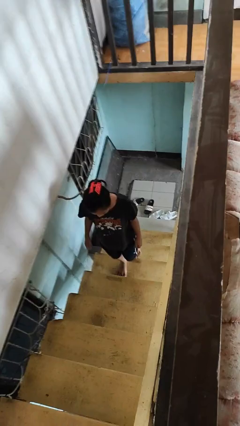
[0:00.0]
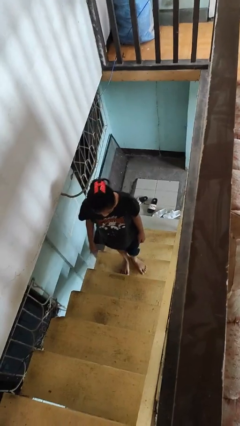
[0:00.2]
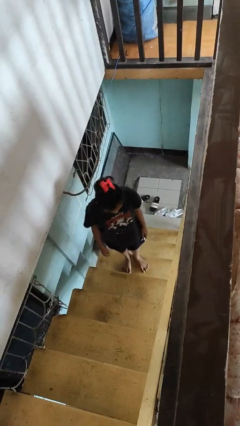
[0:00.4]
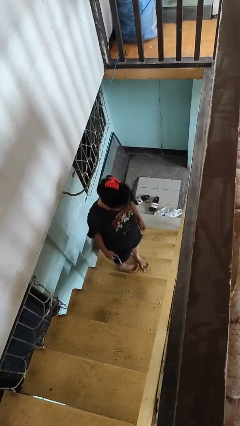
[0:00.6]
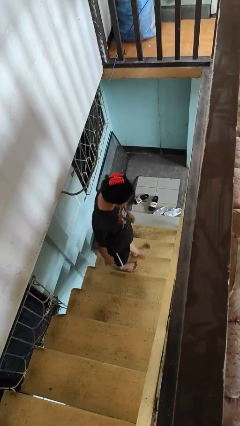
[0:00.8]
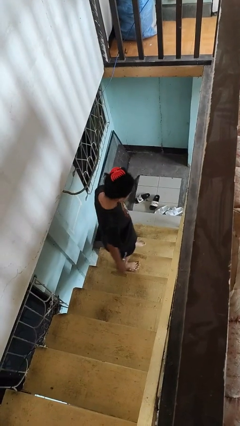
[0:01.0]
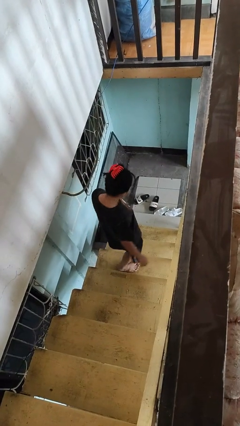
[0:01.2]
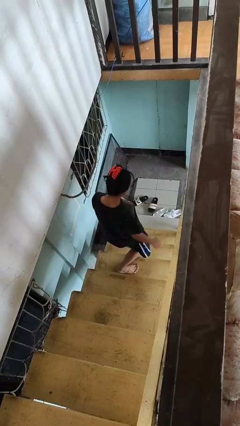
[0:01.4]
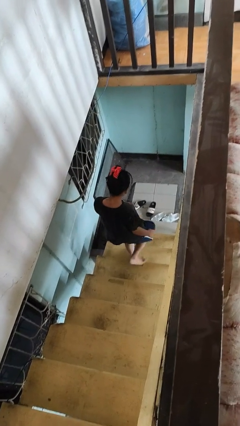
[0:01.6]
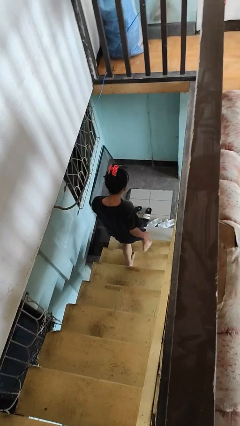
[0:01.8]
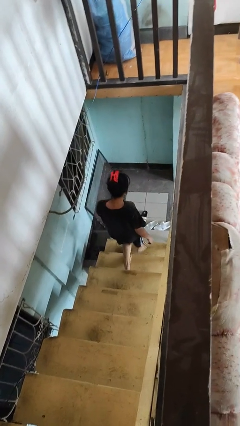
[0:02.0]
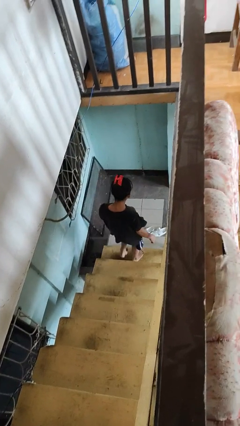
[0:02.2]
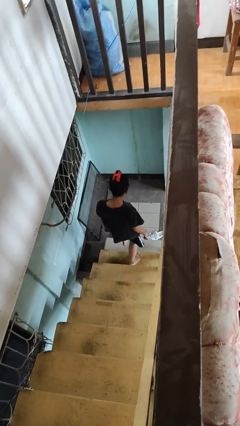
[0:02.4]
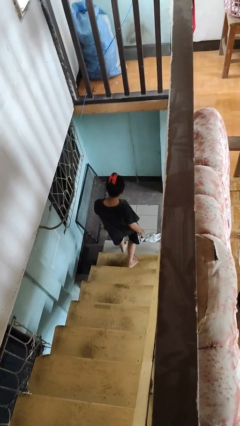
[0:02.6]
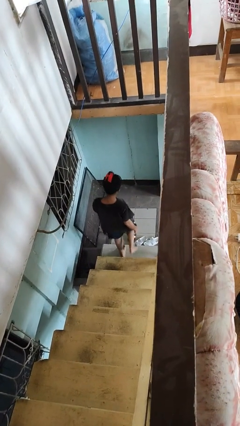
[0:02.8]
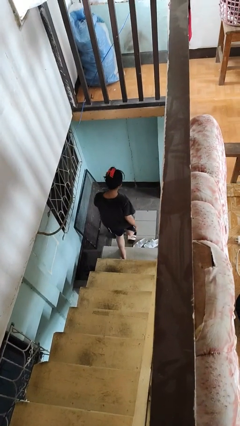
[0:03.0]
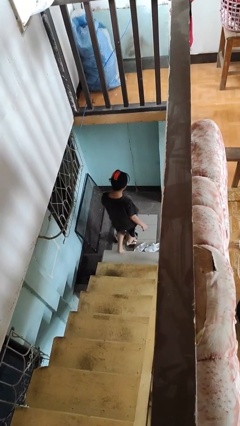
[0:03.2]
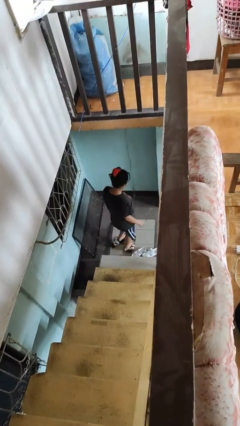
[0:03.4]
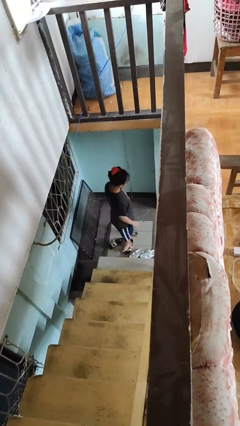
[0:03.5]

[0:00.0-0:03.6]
person climbs down stairs

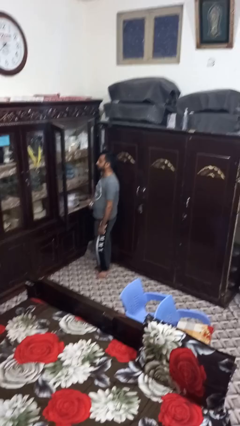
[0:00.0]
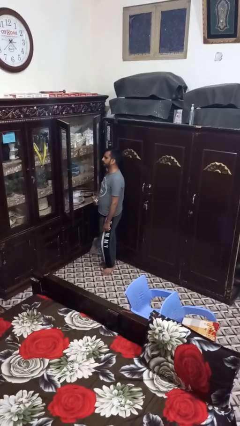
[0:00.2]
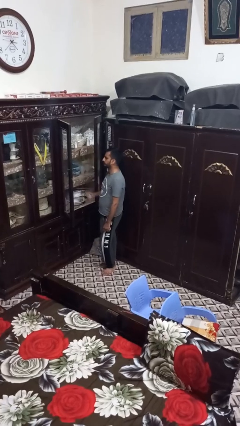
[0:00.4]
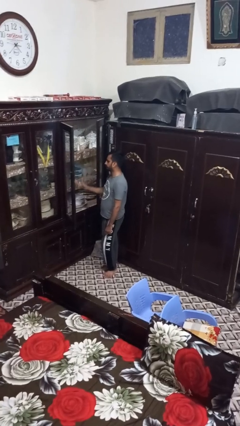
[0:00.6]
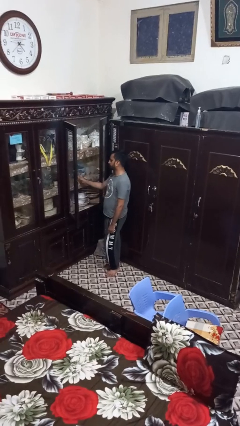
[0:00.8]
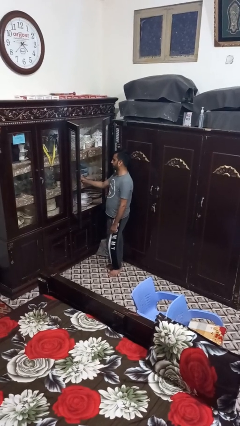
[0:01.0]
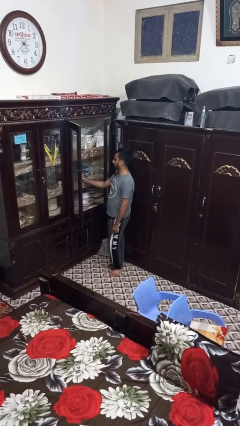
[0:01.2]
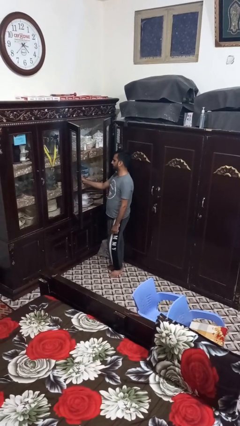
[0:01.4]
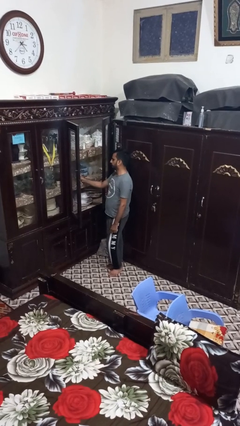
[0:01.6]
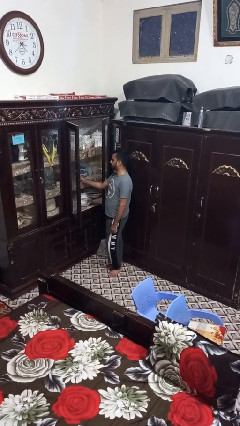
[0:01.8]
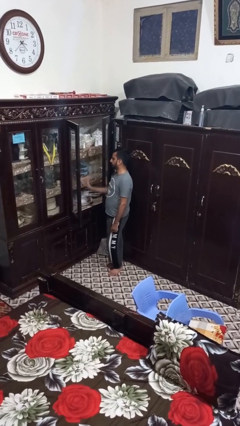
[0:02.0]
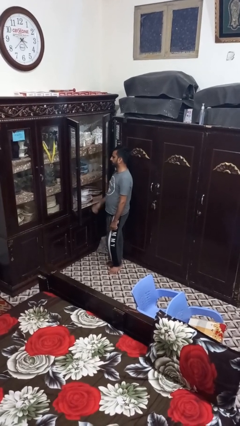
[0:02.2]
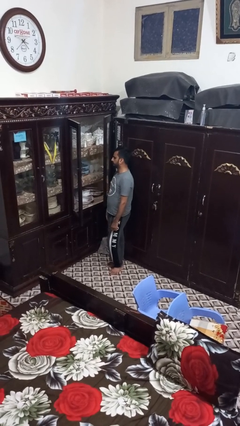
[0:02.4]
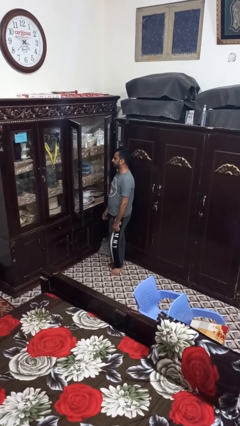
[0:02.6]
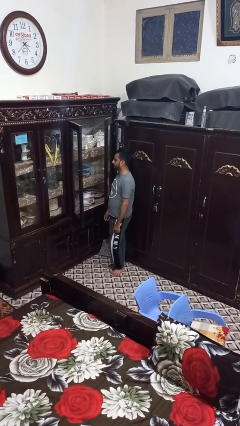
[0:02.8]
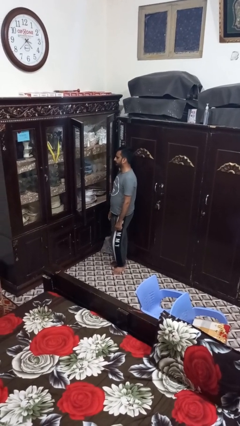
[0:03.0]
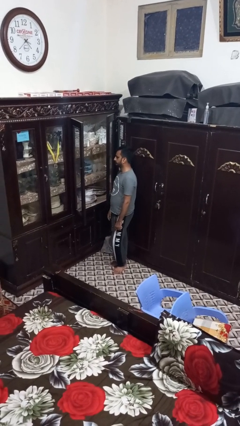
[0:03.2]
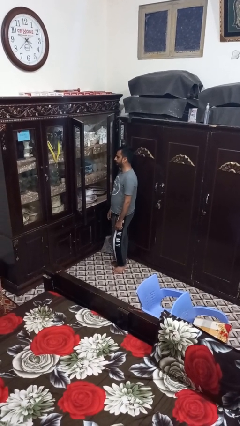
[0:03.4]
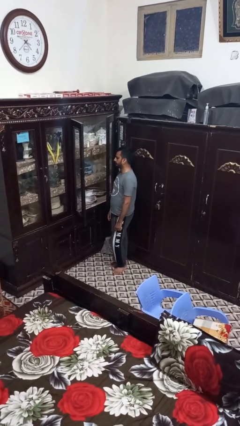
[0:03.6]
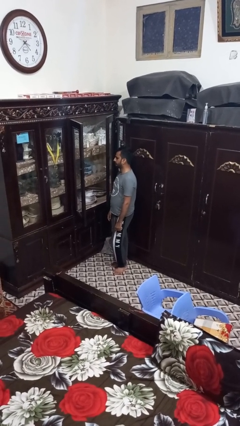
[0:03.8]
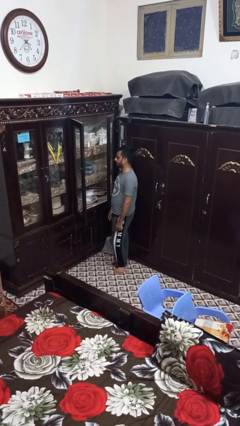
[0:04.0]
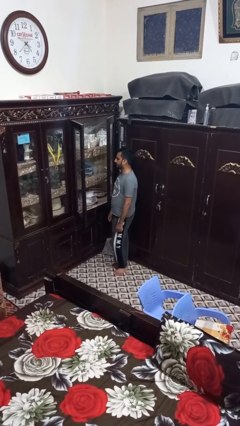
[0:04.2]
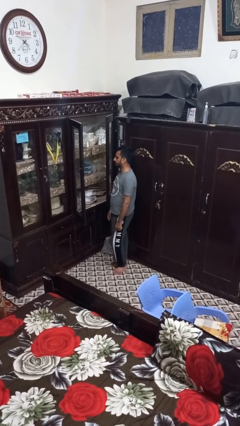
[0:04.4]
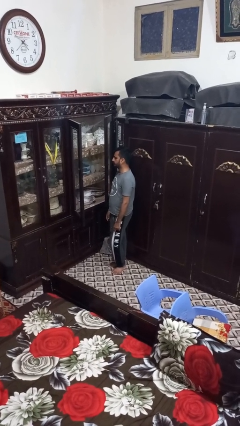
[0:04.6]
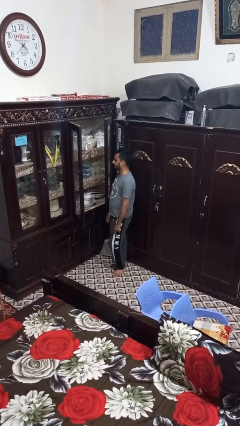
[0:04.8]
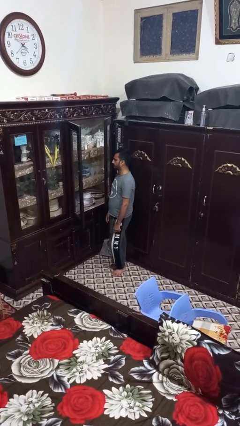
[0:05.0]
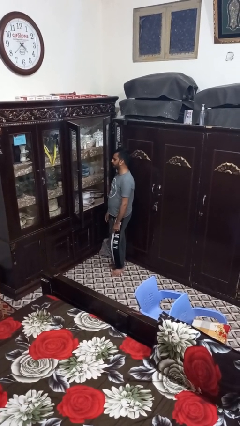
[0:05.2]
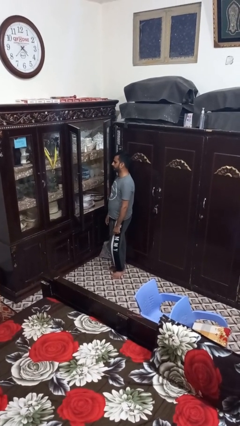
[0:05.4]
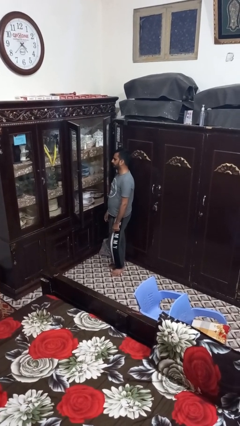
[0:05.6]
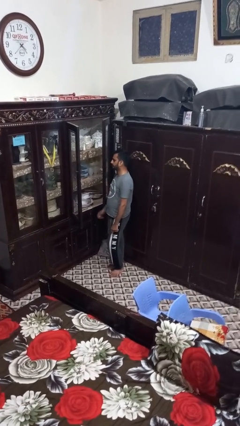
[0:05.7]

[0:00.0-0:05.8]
person puts down object on countertop

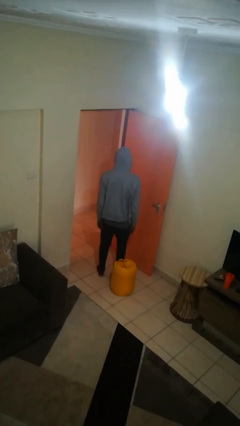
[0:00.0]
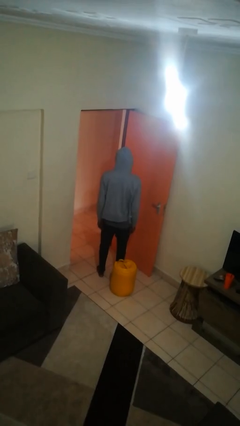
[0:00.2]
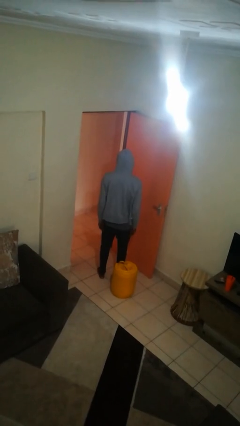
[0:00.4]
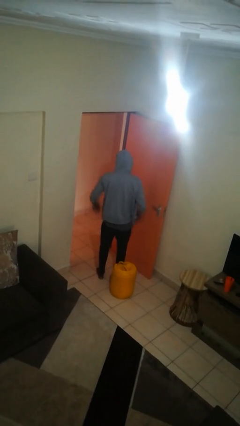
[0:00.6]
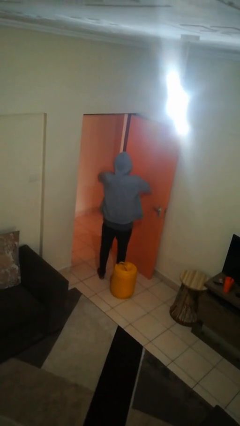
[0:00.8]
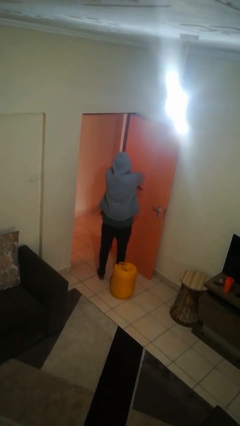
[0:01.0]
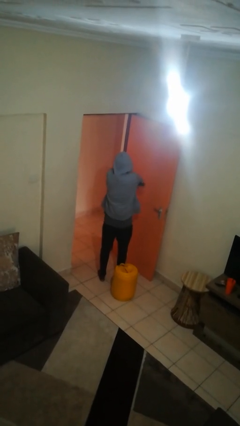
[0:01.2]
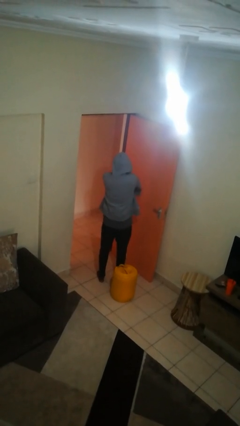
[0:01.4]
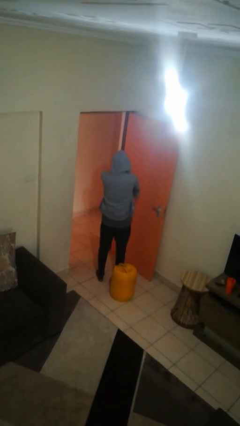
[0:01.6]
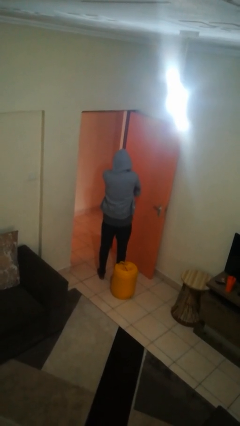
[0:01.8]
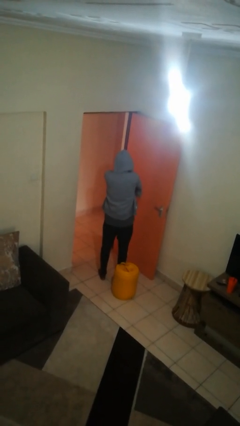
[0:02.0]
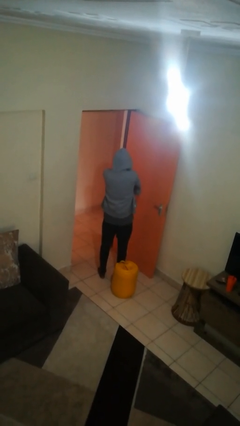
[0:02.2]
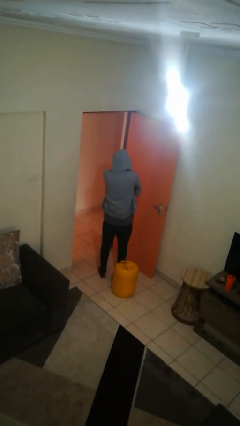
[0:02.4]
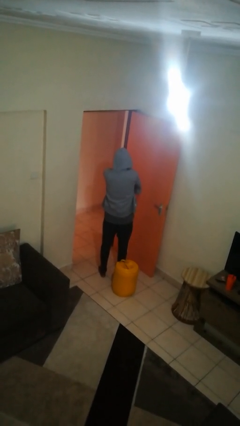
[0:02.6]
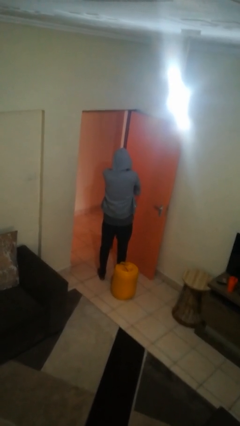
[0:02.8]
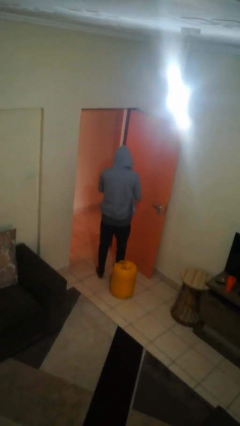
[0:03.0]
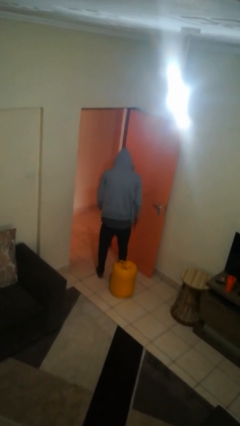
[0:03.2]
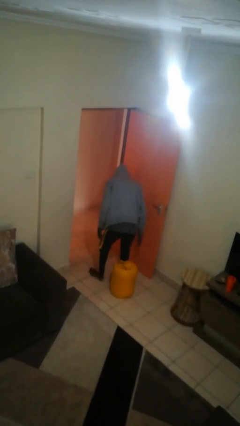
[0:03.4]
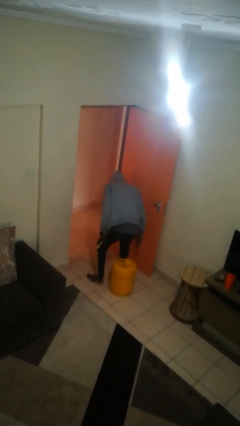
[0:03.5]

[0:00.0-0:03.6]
person crosses arms

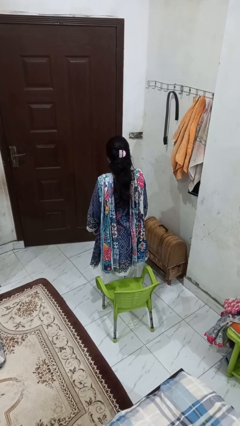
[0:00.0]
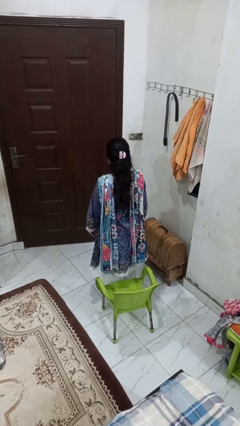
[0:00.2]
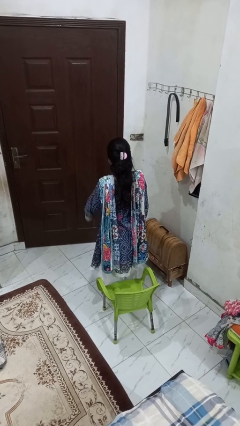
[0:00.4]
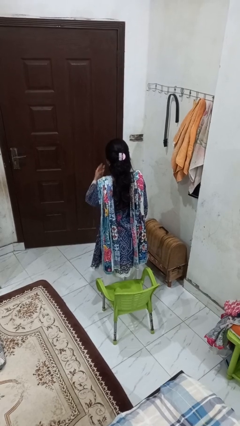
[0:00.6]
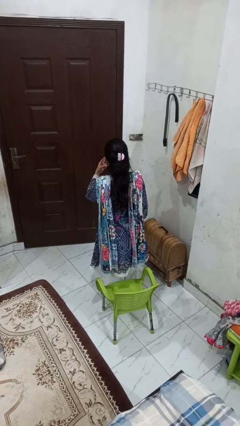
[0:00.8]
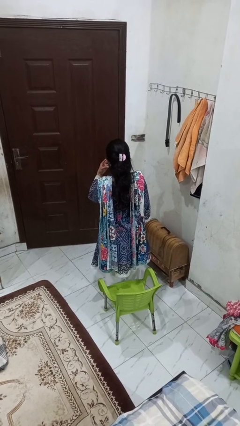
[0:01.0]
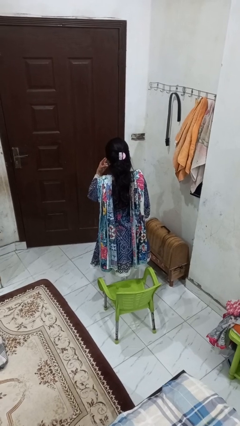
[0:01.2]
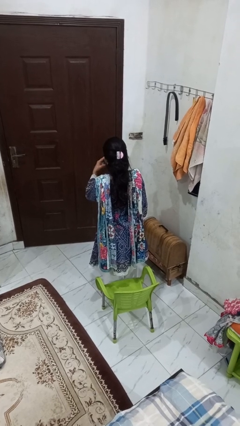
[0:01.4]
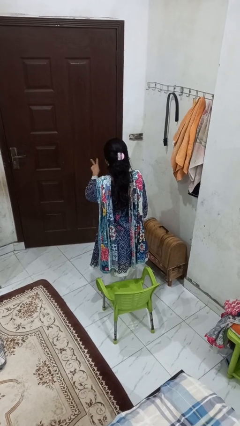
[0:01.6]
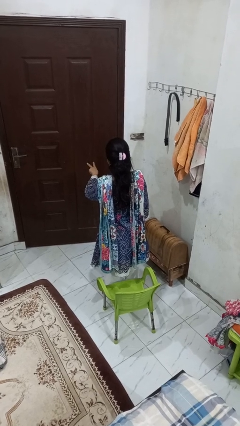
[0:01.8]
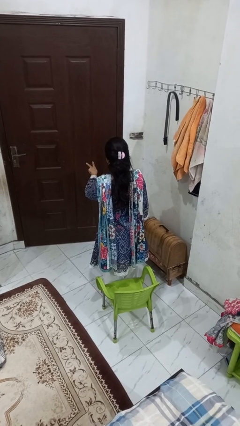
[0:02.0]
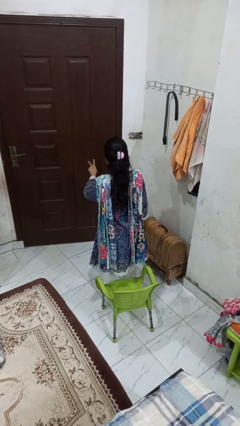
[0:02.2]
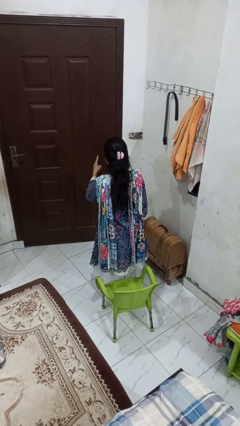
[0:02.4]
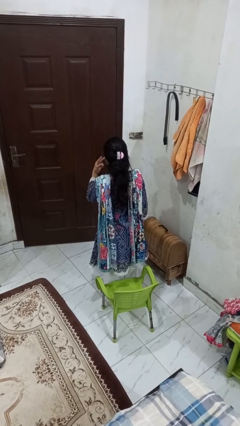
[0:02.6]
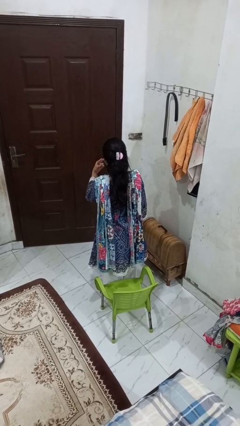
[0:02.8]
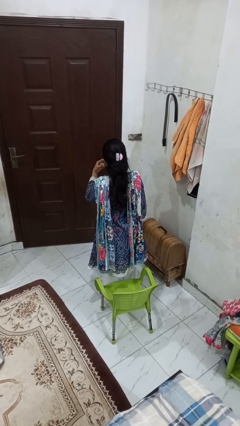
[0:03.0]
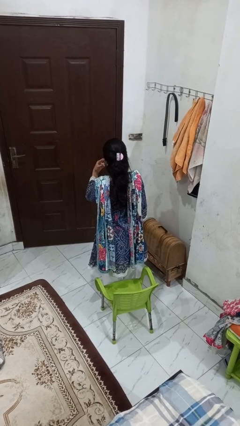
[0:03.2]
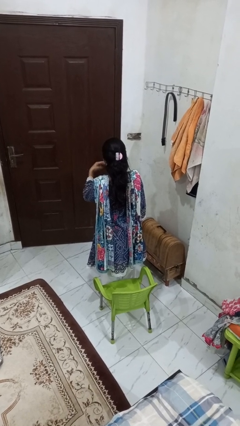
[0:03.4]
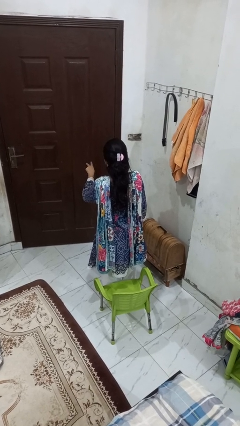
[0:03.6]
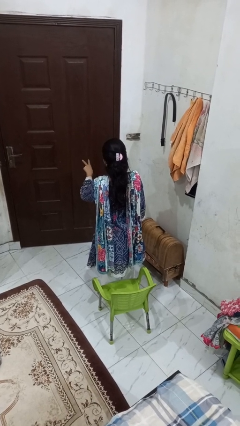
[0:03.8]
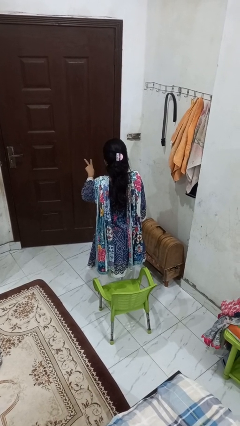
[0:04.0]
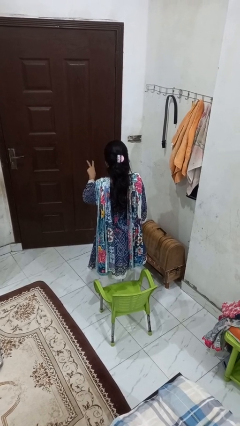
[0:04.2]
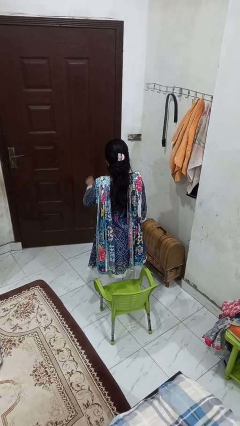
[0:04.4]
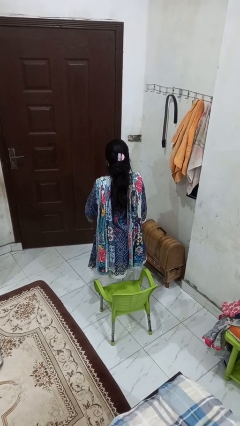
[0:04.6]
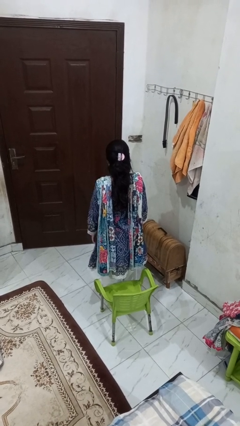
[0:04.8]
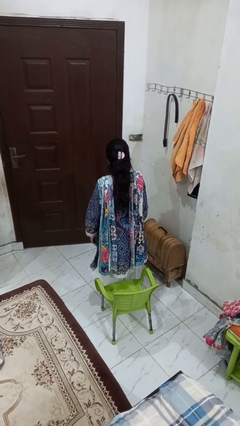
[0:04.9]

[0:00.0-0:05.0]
person gestures watch closely
